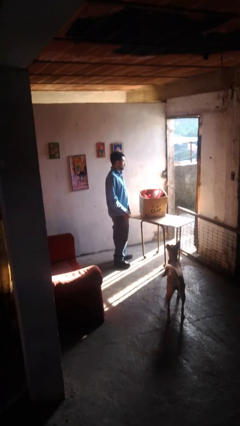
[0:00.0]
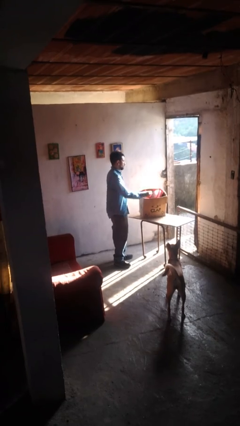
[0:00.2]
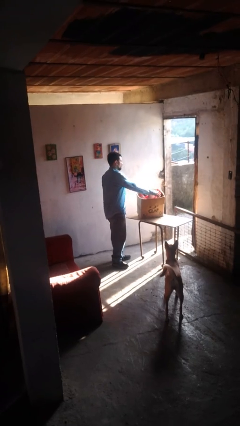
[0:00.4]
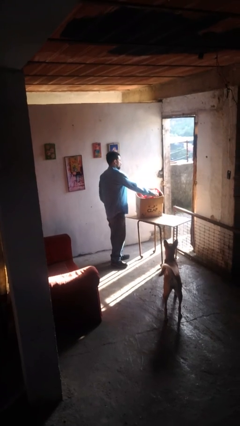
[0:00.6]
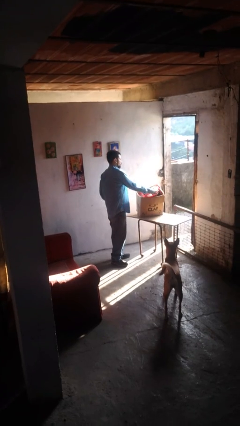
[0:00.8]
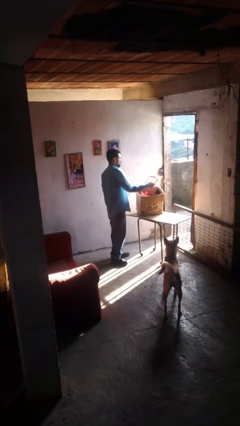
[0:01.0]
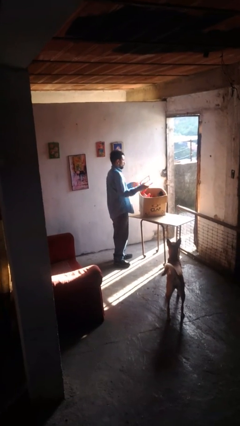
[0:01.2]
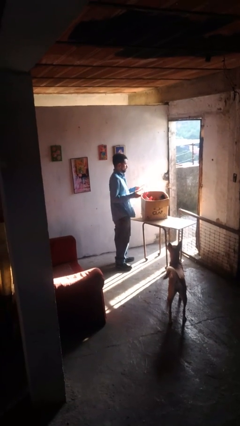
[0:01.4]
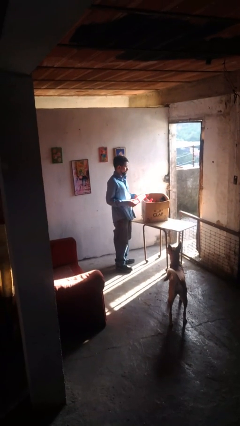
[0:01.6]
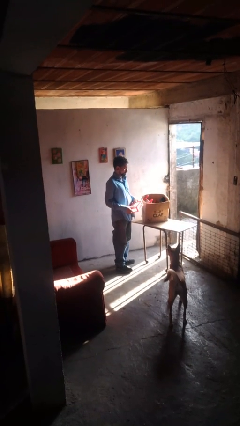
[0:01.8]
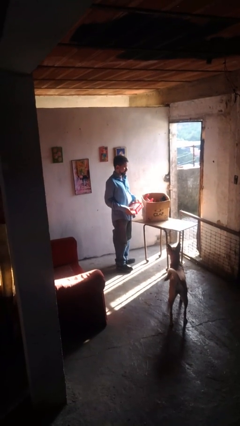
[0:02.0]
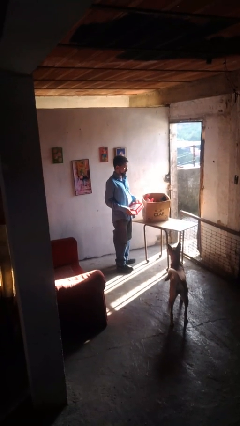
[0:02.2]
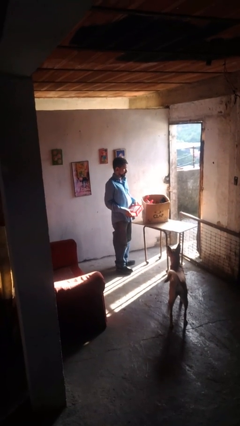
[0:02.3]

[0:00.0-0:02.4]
person takes object from box

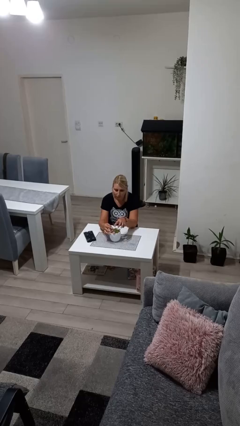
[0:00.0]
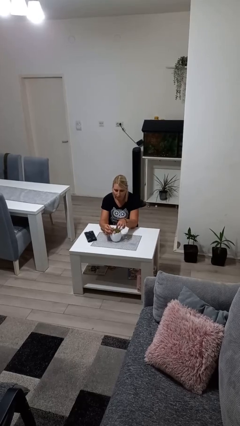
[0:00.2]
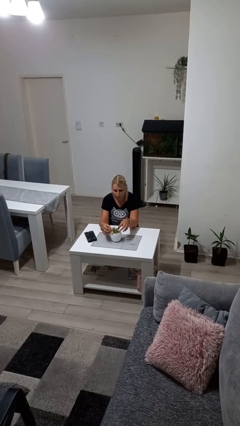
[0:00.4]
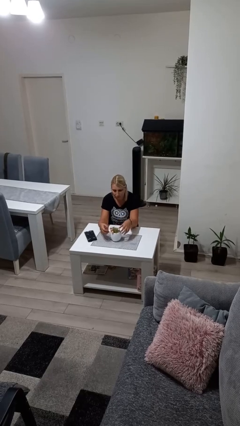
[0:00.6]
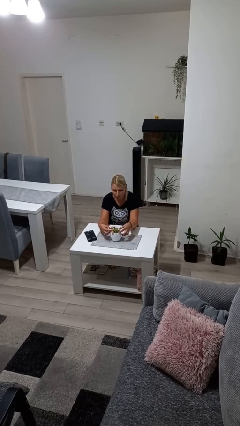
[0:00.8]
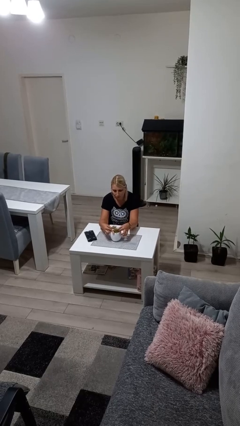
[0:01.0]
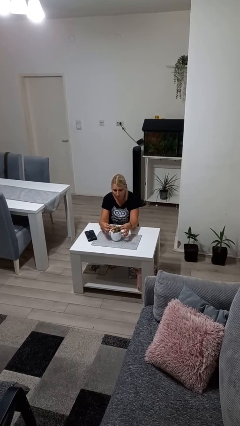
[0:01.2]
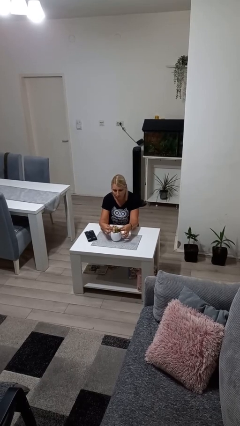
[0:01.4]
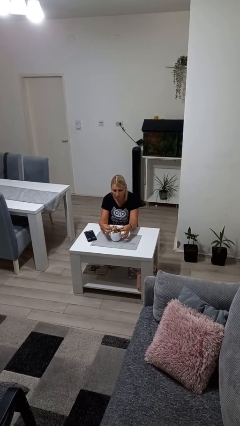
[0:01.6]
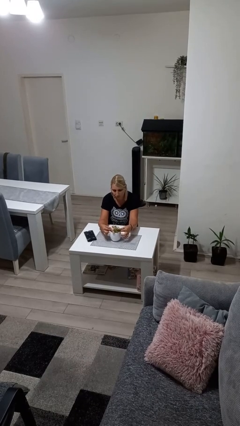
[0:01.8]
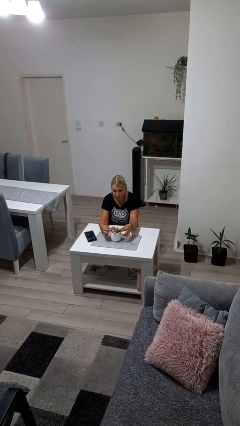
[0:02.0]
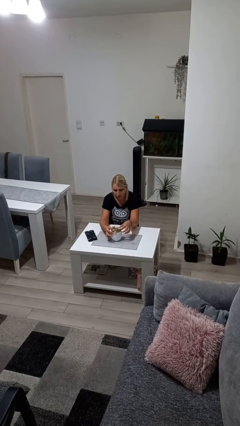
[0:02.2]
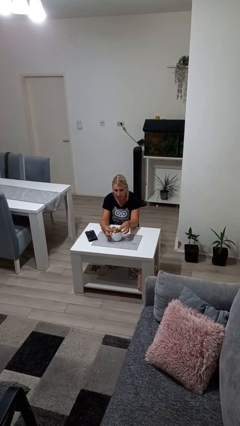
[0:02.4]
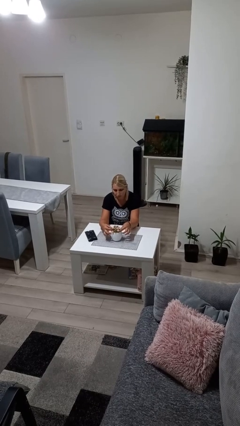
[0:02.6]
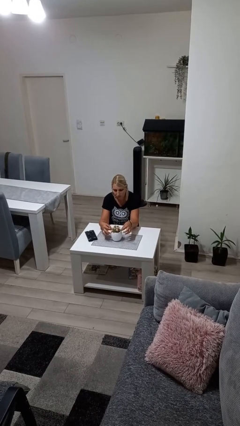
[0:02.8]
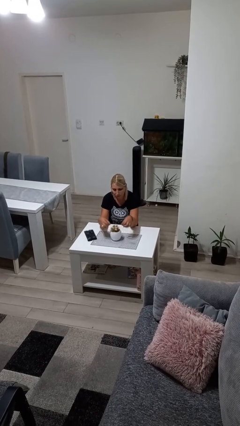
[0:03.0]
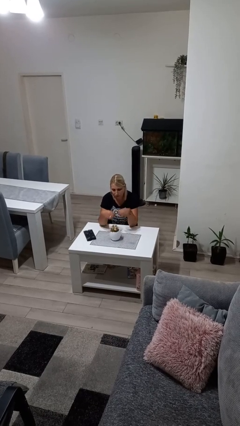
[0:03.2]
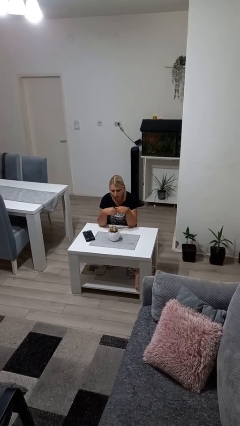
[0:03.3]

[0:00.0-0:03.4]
person arranges flowers in vase

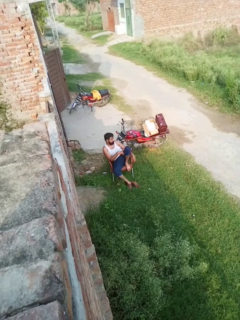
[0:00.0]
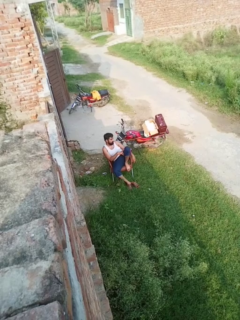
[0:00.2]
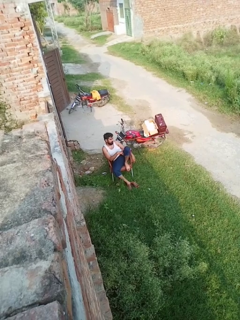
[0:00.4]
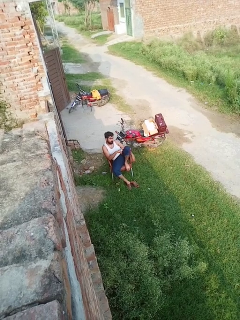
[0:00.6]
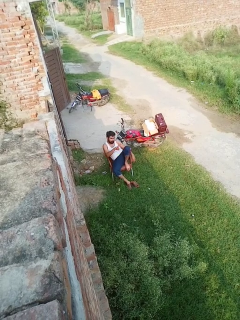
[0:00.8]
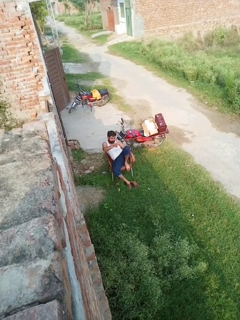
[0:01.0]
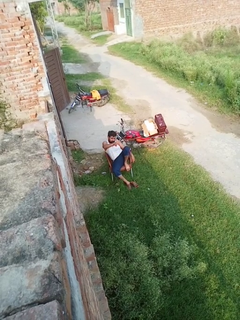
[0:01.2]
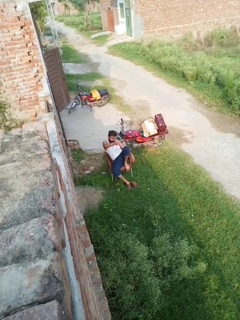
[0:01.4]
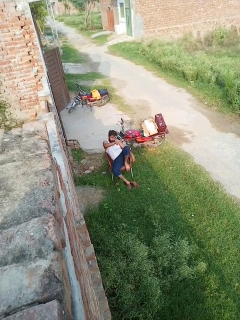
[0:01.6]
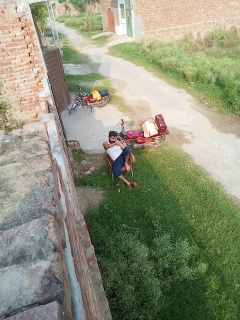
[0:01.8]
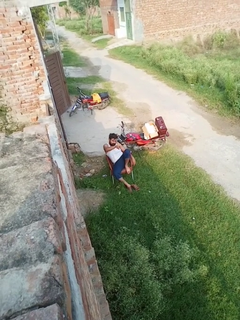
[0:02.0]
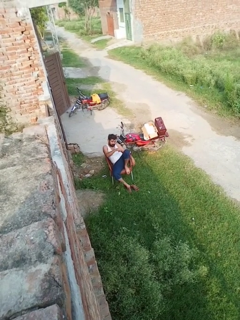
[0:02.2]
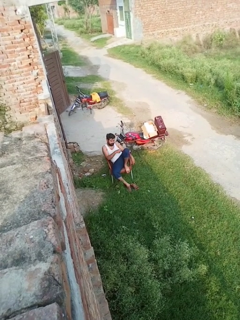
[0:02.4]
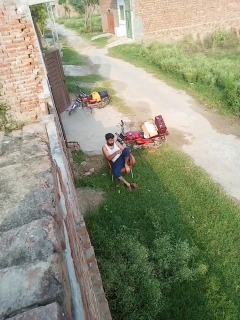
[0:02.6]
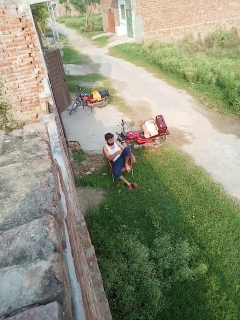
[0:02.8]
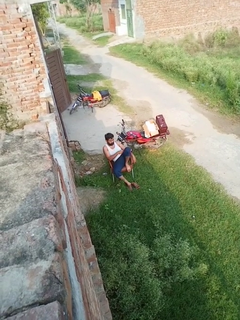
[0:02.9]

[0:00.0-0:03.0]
person gestures peace

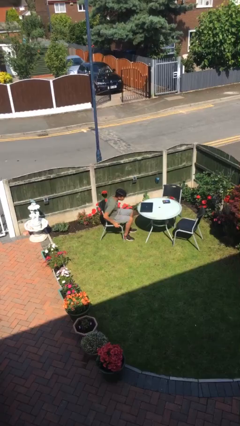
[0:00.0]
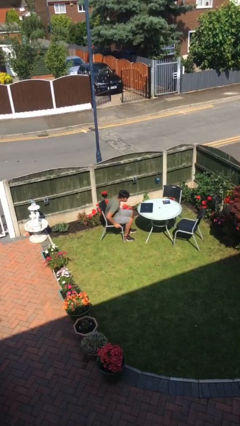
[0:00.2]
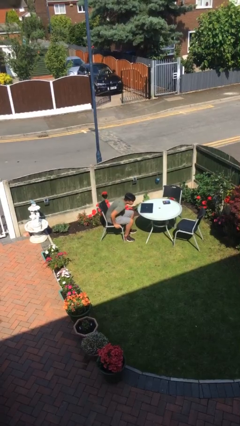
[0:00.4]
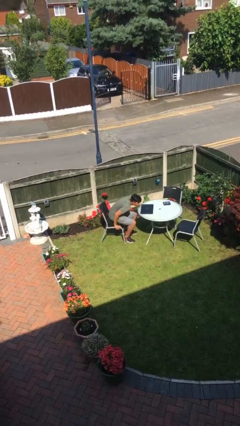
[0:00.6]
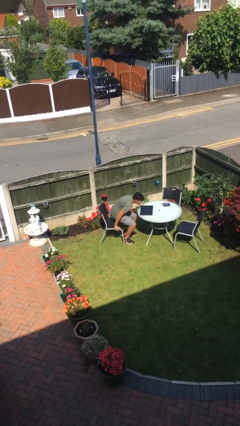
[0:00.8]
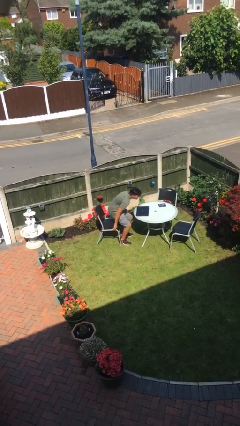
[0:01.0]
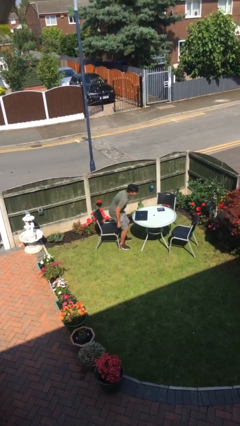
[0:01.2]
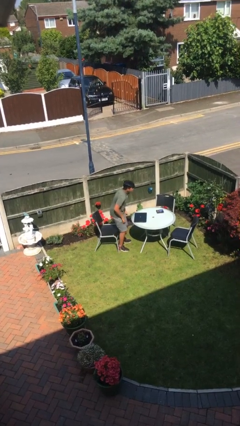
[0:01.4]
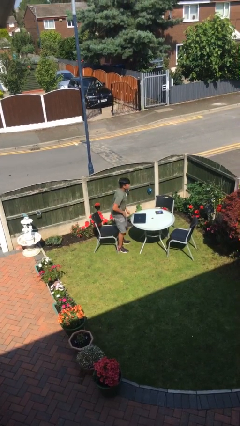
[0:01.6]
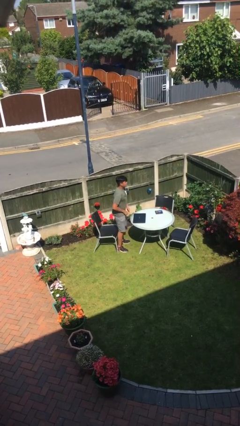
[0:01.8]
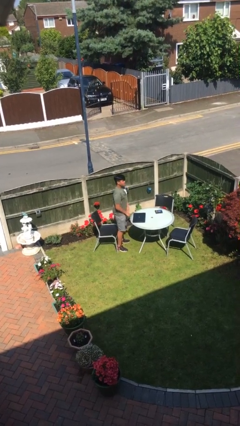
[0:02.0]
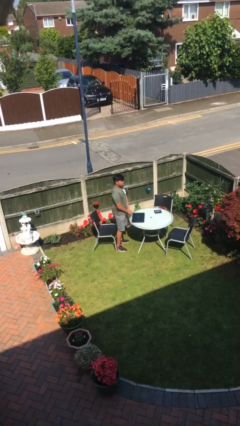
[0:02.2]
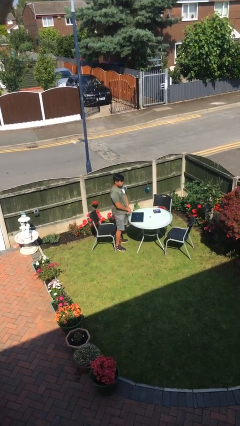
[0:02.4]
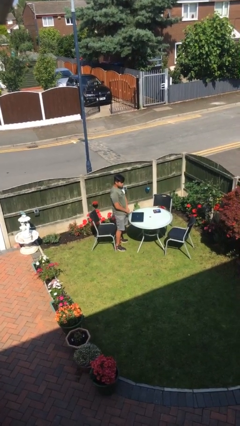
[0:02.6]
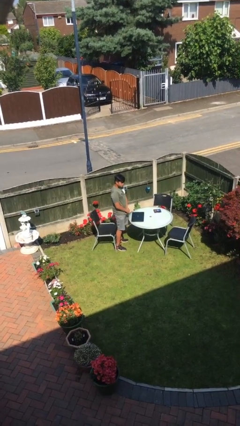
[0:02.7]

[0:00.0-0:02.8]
person stands up

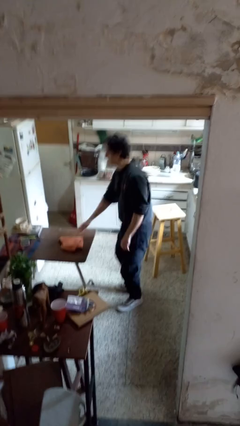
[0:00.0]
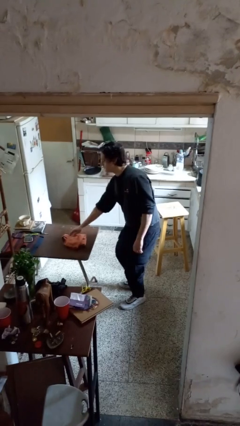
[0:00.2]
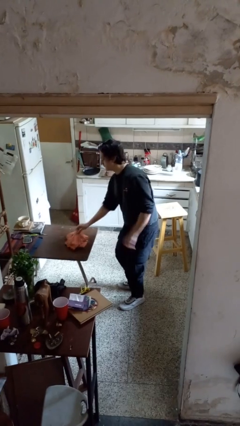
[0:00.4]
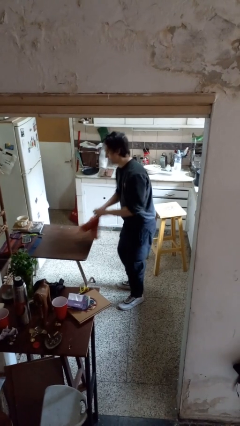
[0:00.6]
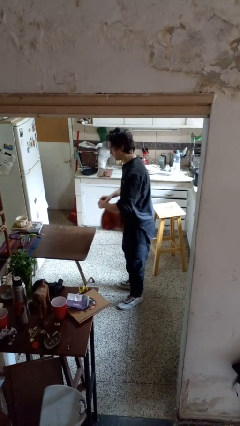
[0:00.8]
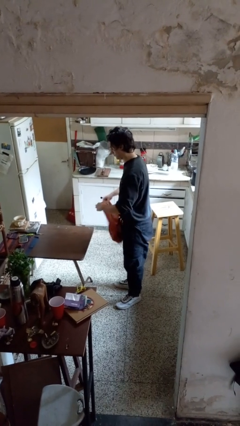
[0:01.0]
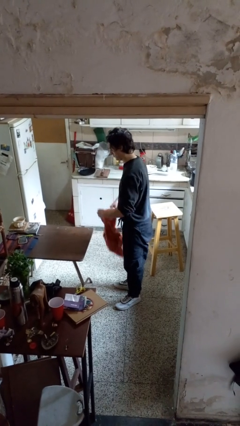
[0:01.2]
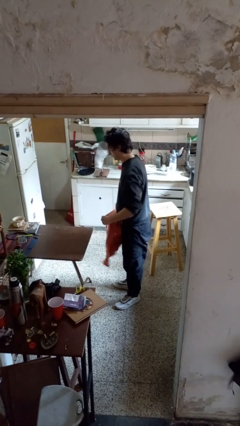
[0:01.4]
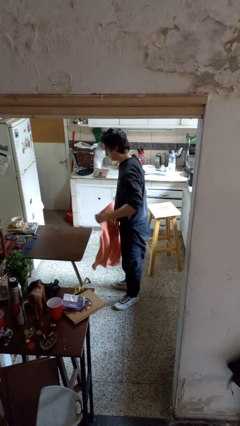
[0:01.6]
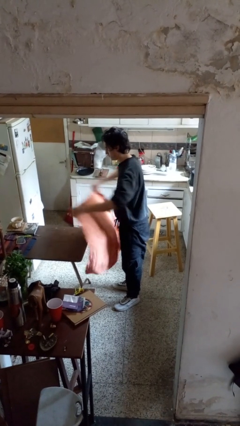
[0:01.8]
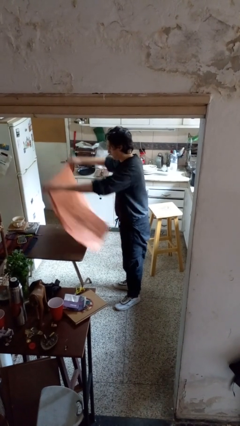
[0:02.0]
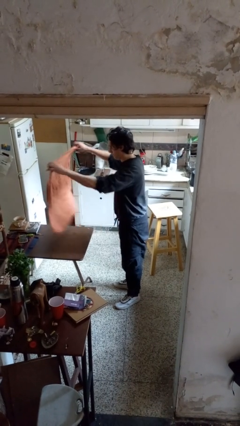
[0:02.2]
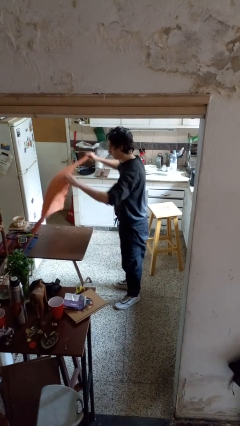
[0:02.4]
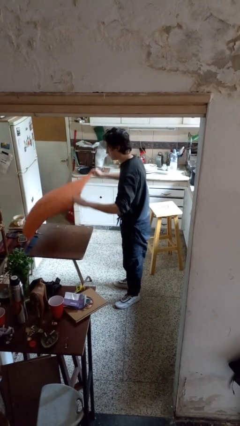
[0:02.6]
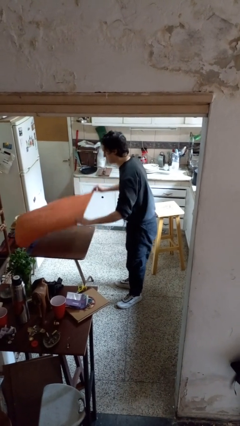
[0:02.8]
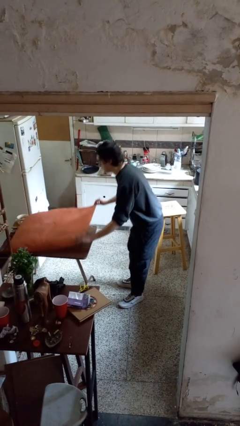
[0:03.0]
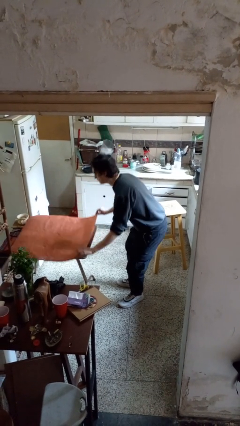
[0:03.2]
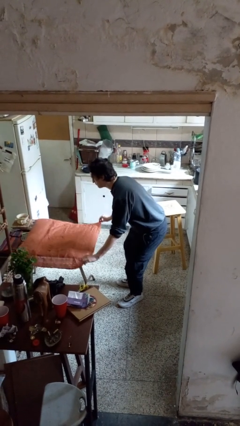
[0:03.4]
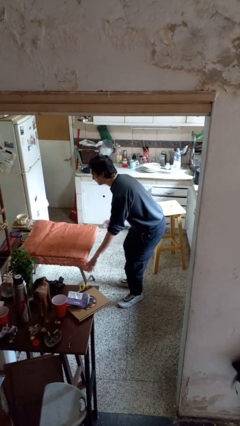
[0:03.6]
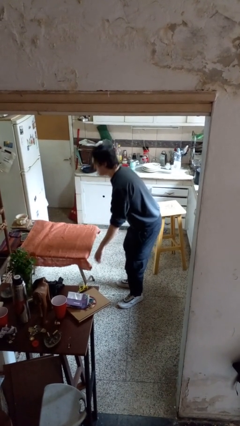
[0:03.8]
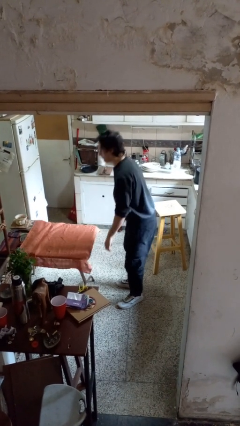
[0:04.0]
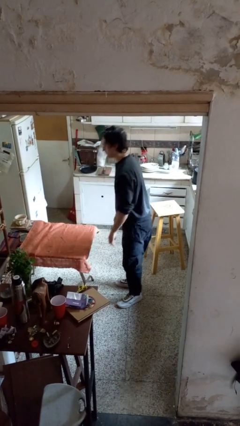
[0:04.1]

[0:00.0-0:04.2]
person spreads tablecloth

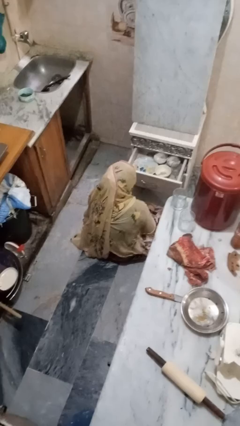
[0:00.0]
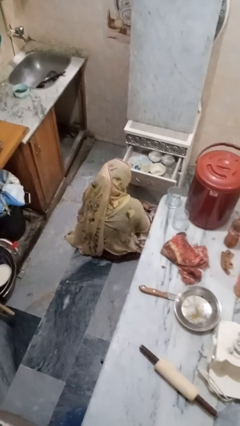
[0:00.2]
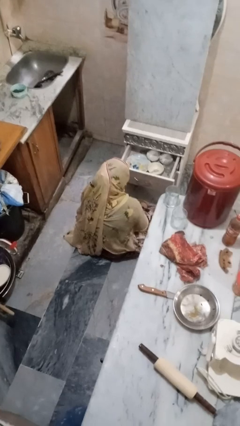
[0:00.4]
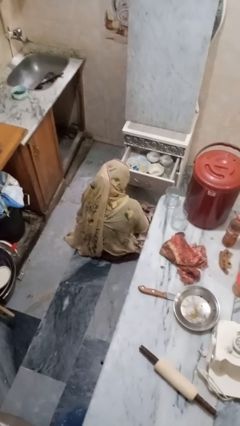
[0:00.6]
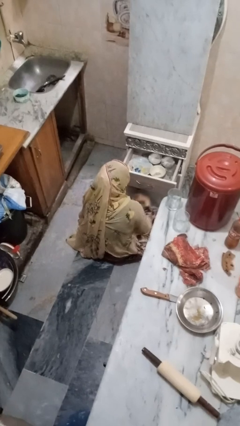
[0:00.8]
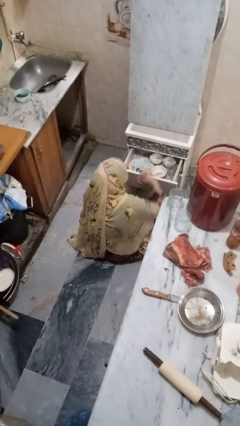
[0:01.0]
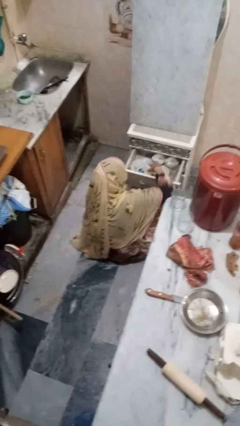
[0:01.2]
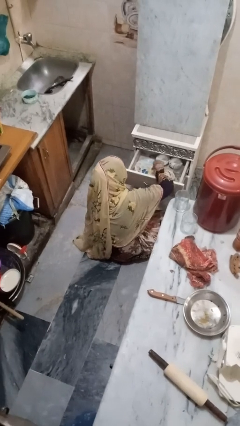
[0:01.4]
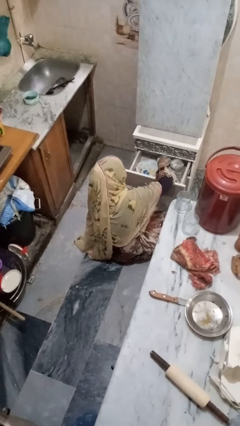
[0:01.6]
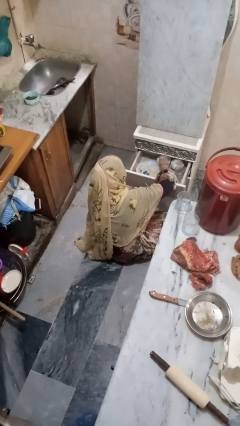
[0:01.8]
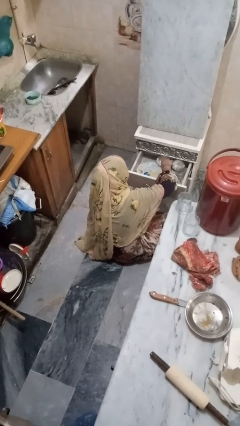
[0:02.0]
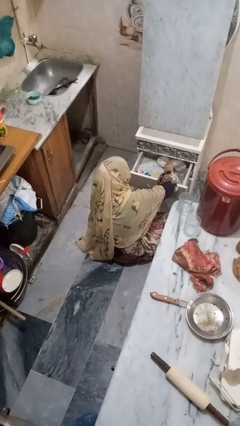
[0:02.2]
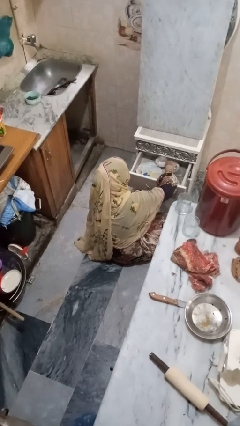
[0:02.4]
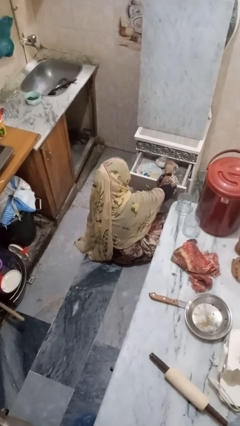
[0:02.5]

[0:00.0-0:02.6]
person searches in kitchen drawer
